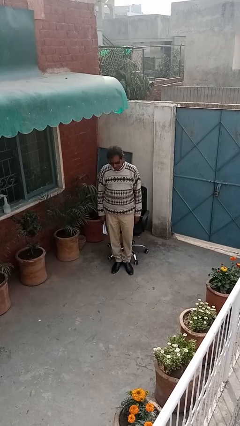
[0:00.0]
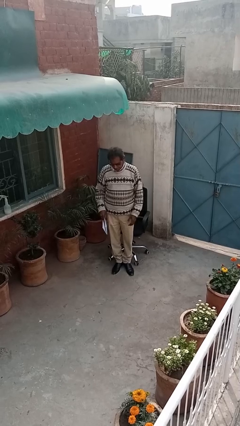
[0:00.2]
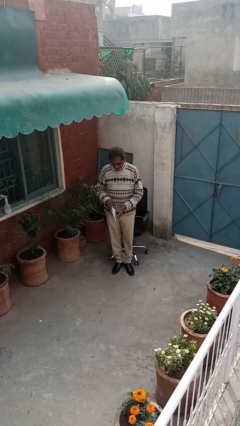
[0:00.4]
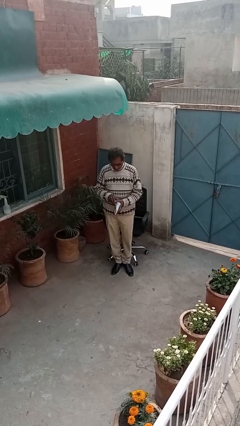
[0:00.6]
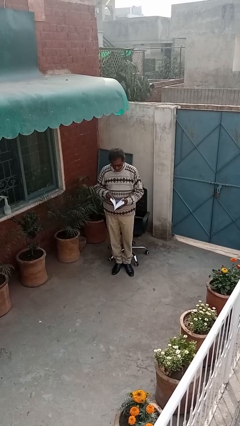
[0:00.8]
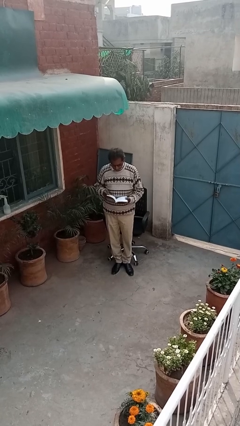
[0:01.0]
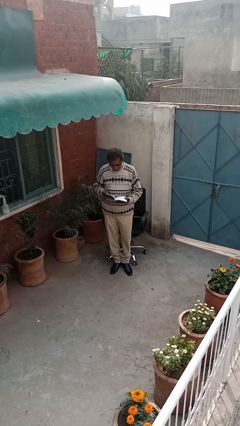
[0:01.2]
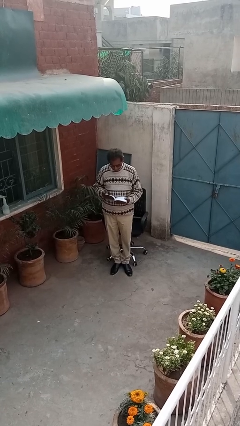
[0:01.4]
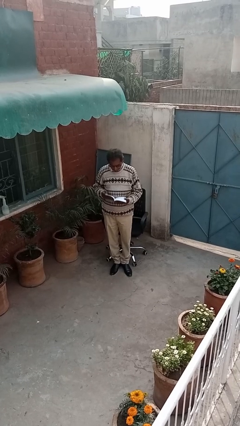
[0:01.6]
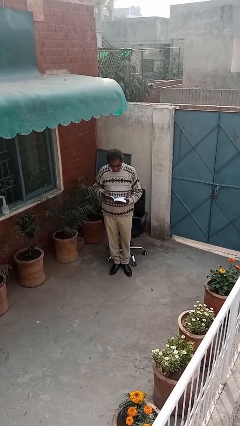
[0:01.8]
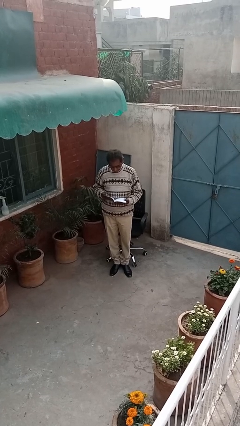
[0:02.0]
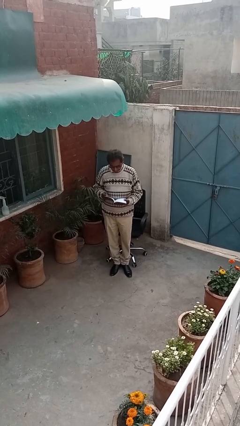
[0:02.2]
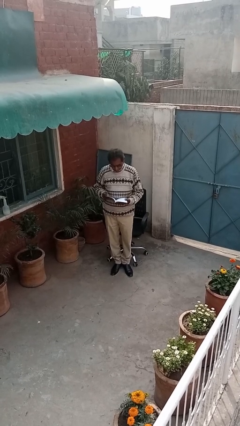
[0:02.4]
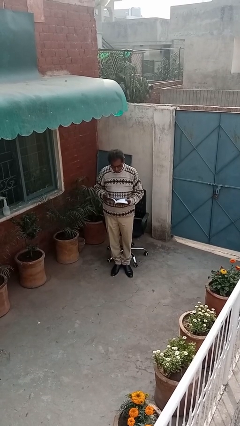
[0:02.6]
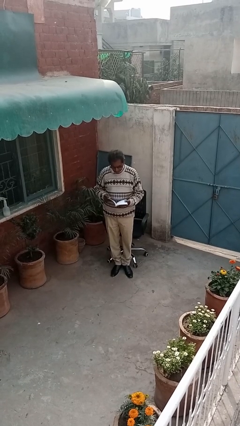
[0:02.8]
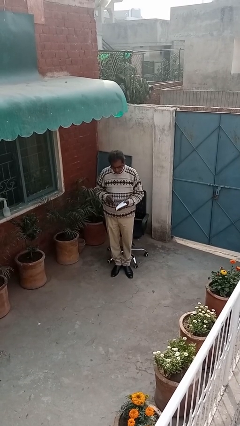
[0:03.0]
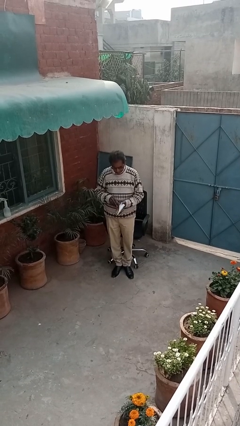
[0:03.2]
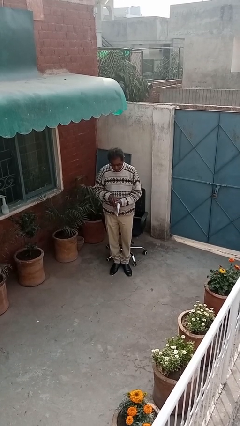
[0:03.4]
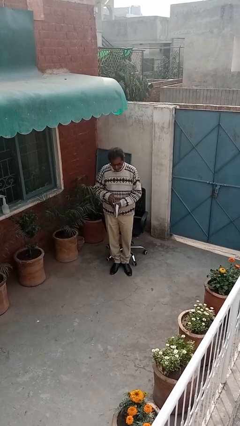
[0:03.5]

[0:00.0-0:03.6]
person reads document

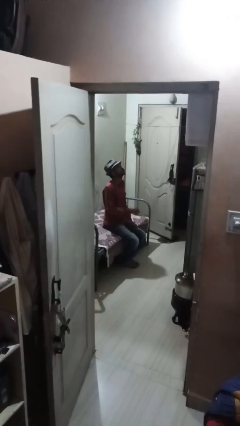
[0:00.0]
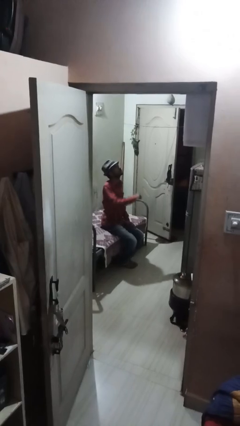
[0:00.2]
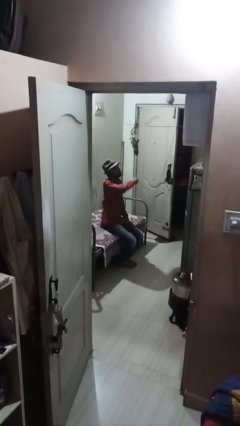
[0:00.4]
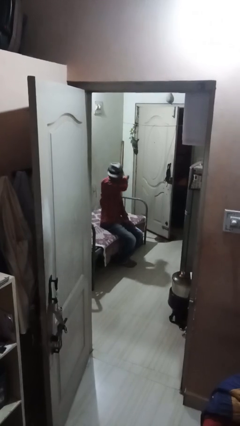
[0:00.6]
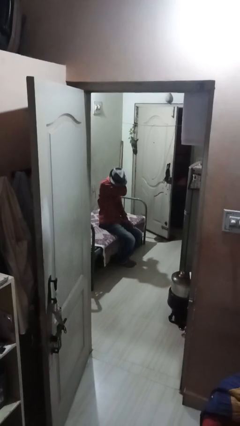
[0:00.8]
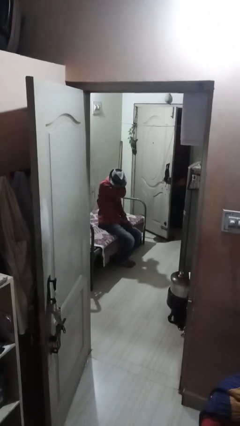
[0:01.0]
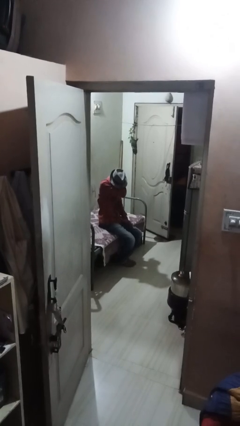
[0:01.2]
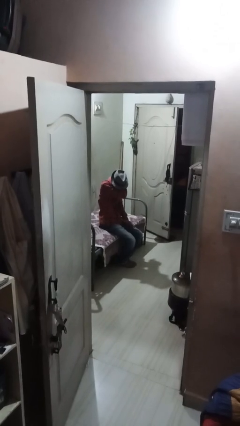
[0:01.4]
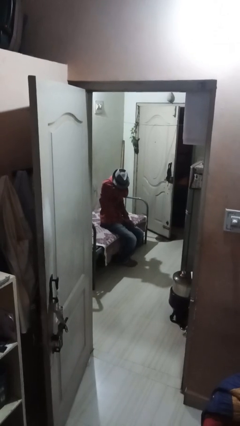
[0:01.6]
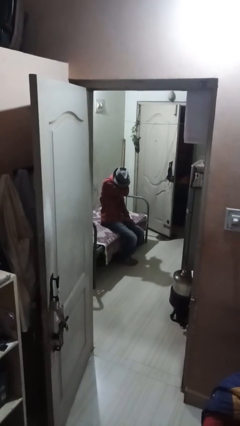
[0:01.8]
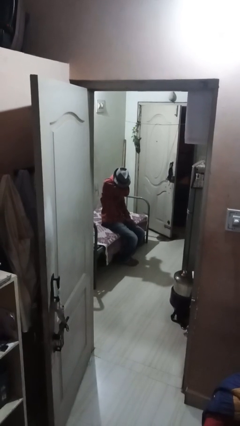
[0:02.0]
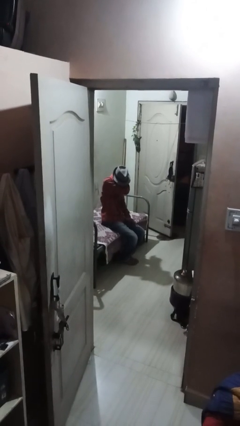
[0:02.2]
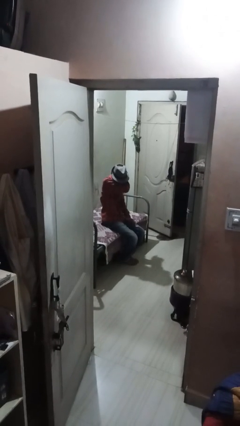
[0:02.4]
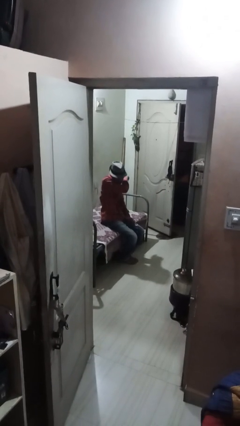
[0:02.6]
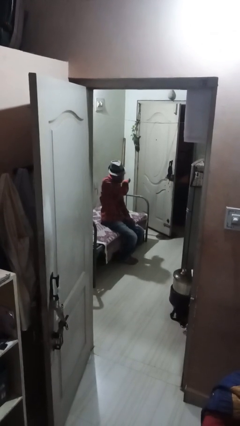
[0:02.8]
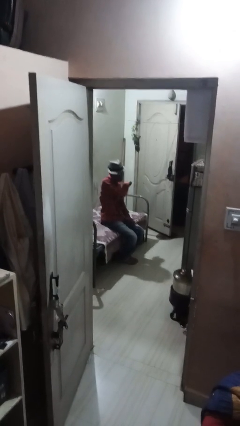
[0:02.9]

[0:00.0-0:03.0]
person sneezes into arm

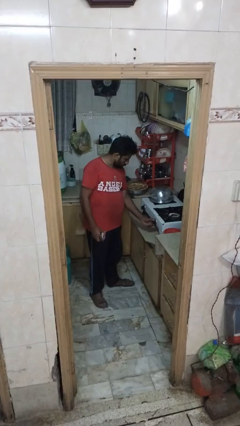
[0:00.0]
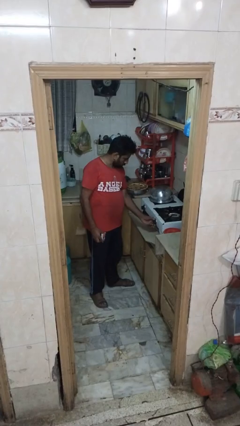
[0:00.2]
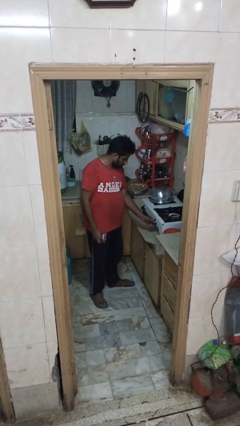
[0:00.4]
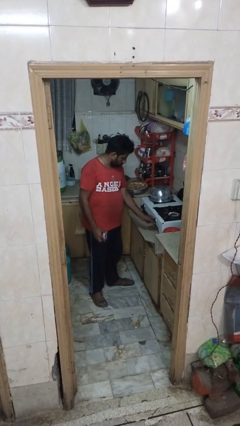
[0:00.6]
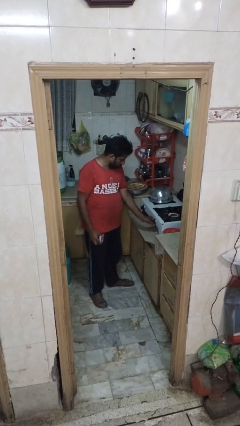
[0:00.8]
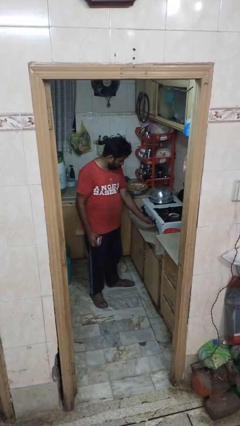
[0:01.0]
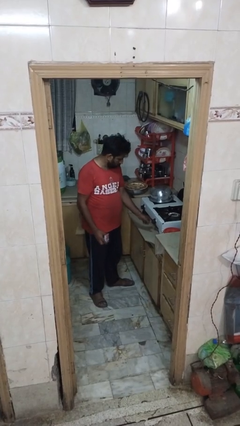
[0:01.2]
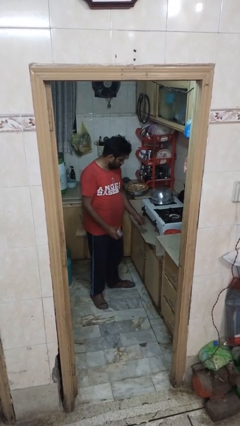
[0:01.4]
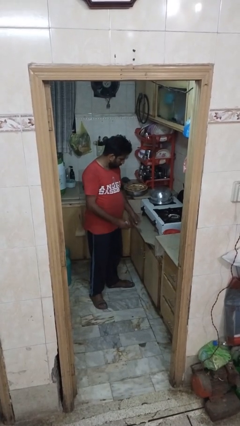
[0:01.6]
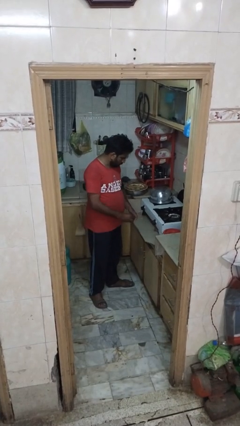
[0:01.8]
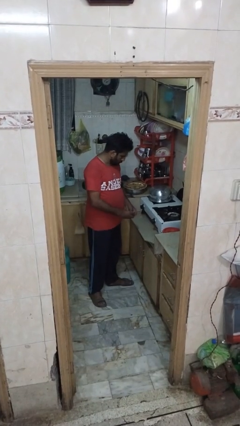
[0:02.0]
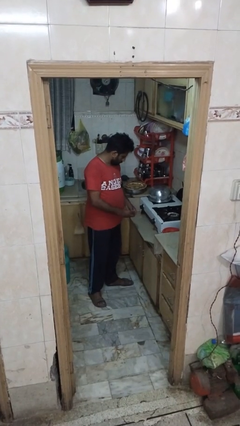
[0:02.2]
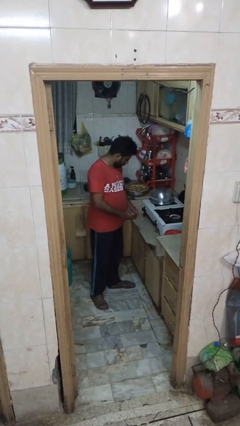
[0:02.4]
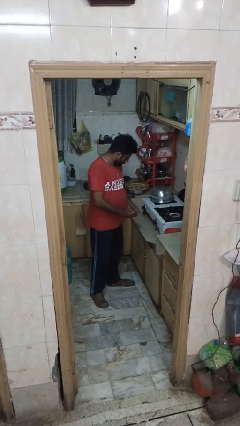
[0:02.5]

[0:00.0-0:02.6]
person turns off stovetop

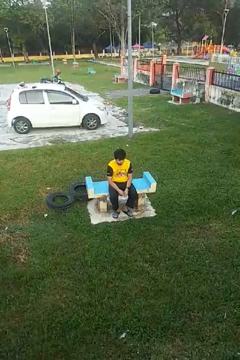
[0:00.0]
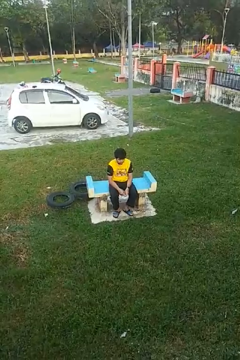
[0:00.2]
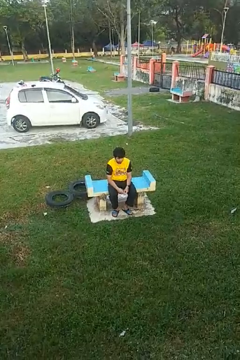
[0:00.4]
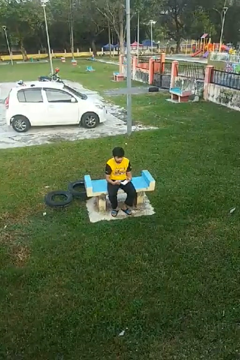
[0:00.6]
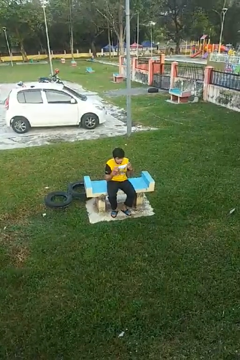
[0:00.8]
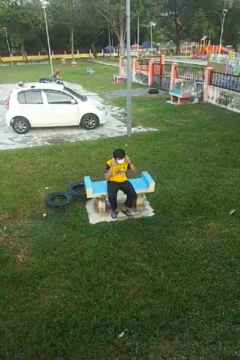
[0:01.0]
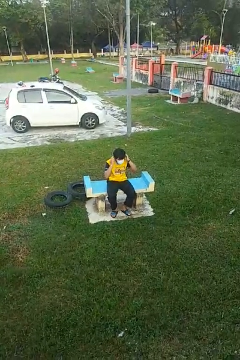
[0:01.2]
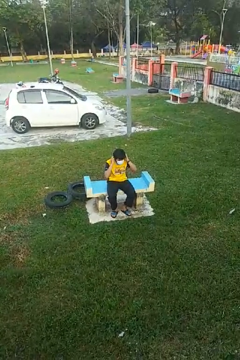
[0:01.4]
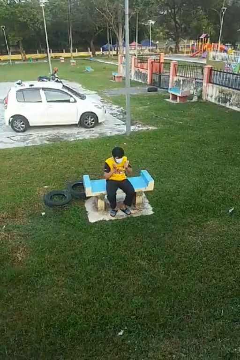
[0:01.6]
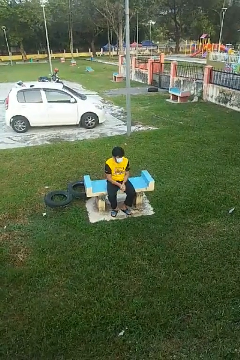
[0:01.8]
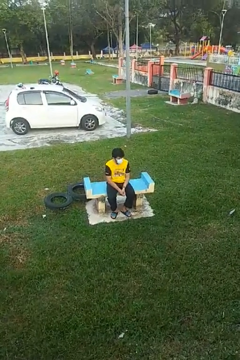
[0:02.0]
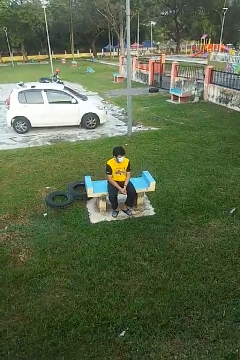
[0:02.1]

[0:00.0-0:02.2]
person puts on facemask

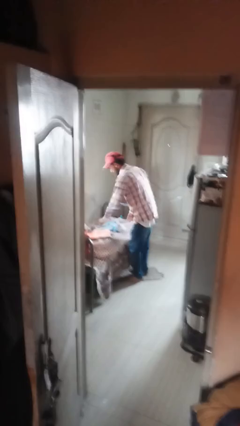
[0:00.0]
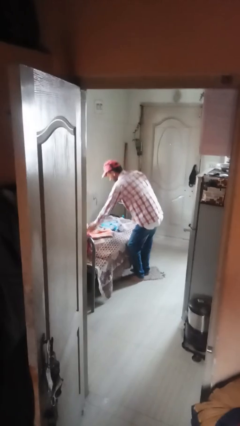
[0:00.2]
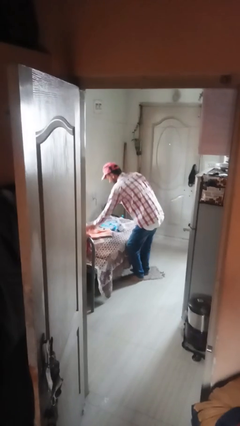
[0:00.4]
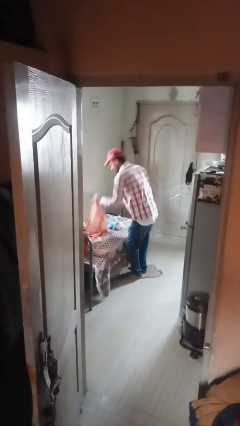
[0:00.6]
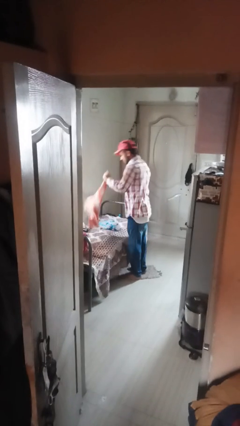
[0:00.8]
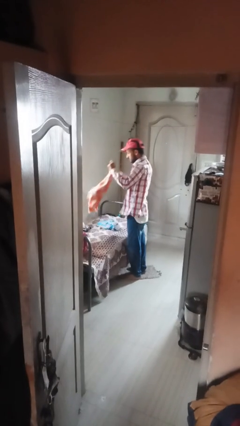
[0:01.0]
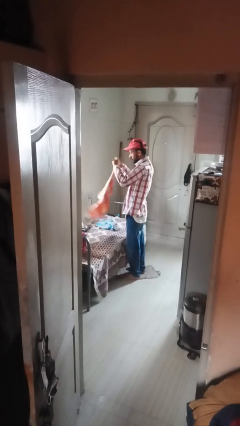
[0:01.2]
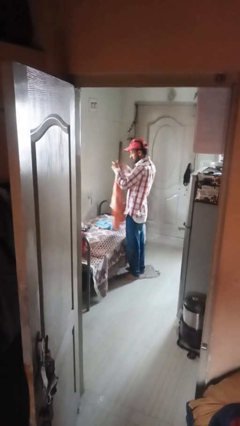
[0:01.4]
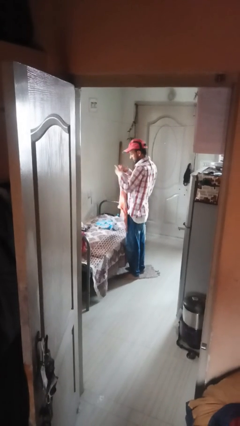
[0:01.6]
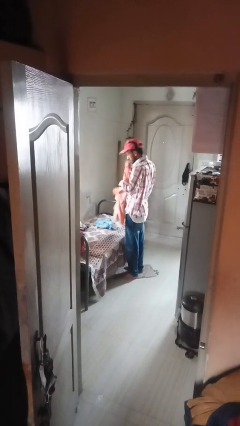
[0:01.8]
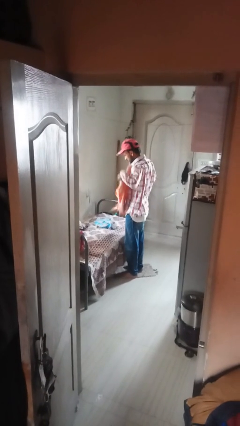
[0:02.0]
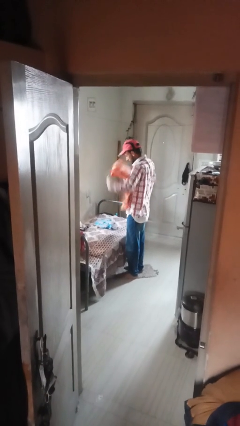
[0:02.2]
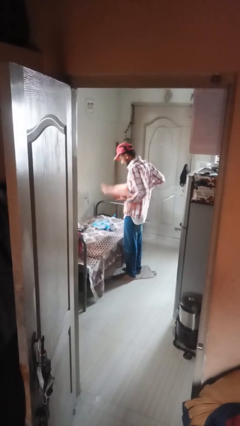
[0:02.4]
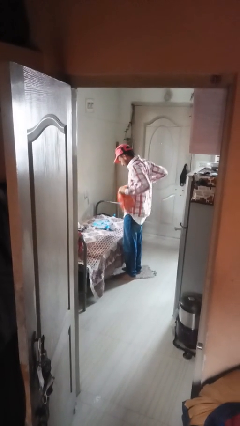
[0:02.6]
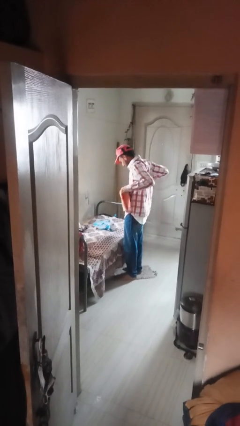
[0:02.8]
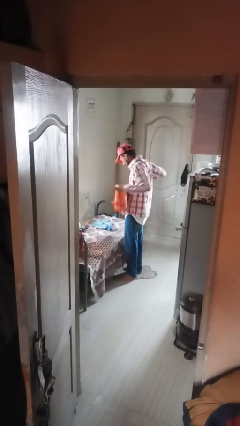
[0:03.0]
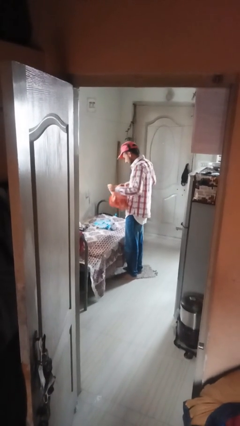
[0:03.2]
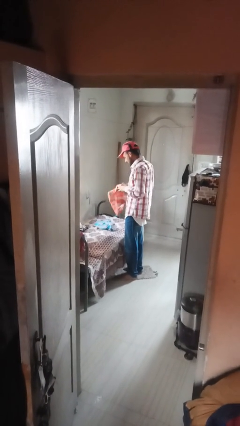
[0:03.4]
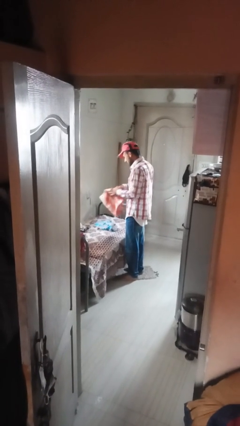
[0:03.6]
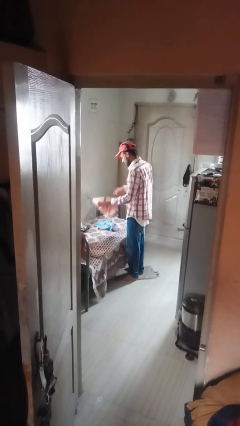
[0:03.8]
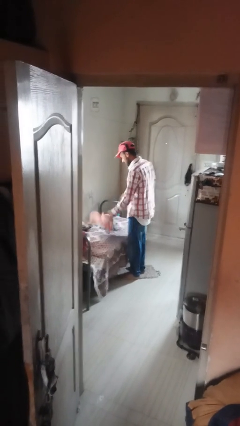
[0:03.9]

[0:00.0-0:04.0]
person folds towel

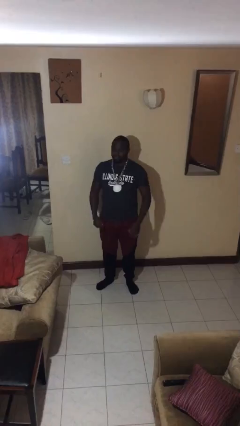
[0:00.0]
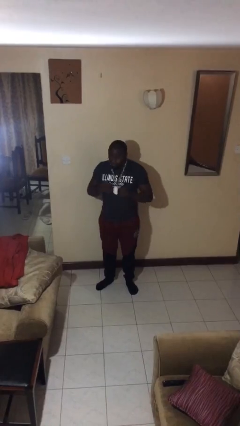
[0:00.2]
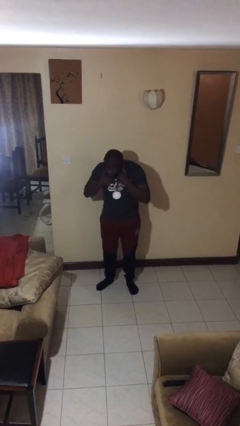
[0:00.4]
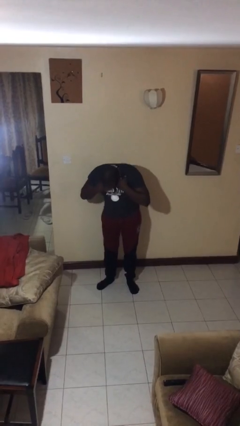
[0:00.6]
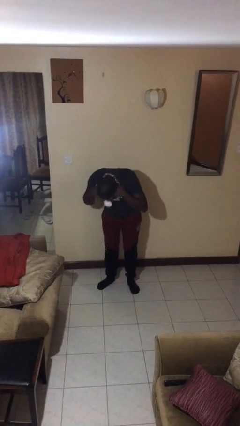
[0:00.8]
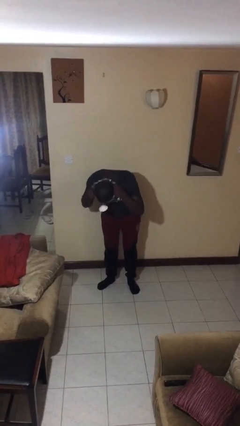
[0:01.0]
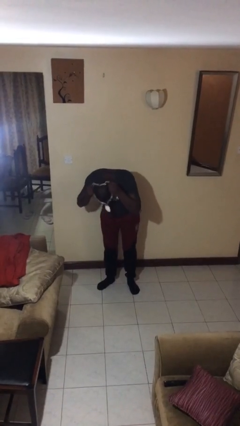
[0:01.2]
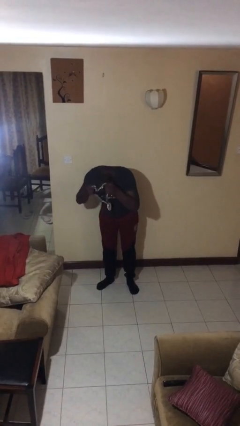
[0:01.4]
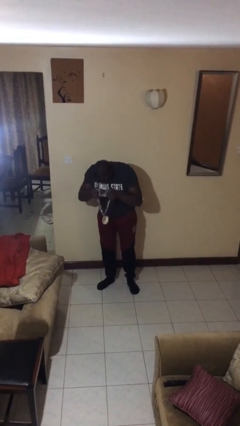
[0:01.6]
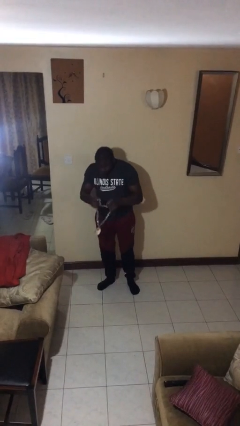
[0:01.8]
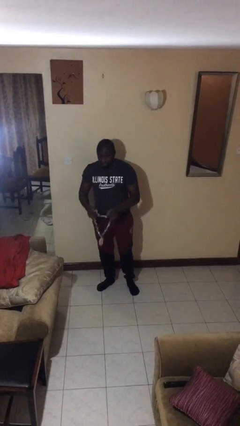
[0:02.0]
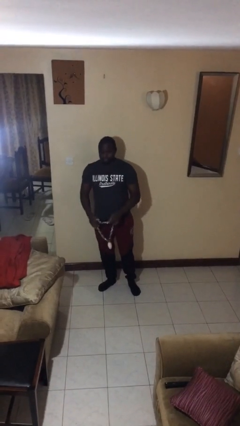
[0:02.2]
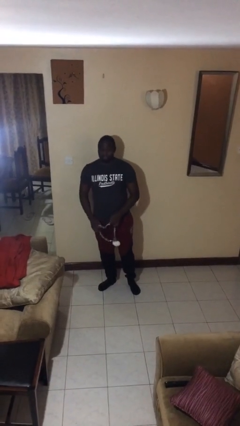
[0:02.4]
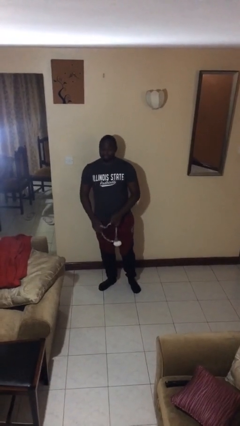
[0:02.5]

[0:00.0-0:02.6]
person takes off necklace
